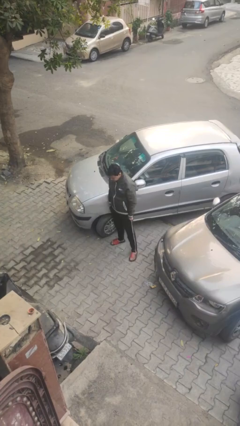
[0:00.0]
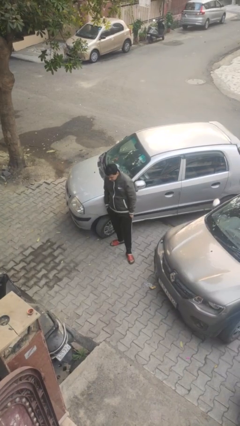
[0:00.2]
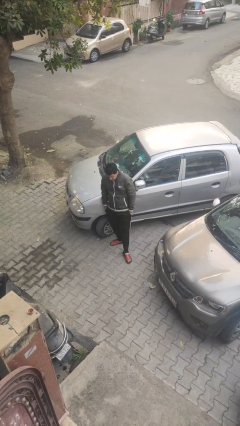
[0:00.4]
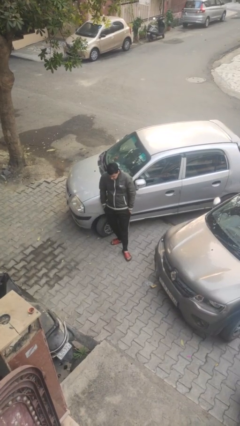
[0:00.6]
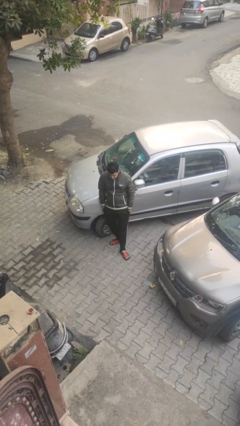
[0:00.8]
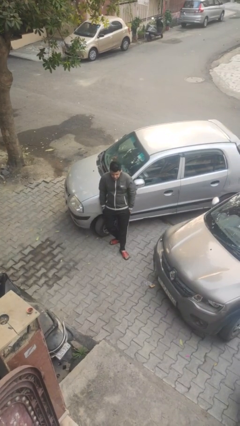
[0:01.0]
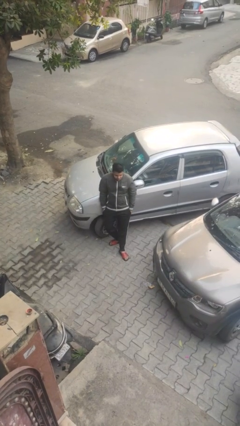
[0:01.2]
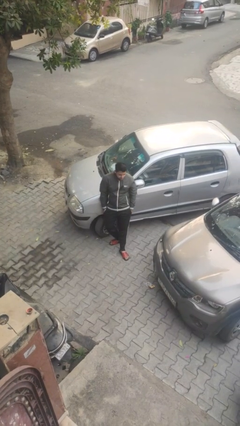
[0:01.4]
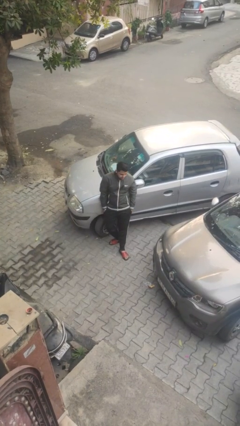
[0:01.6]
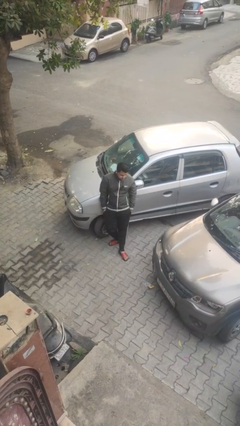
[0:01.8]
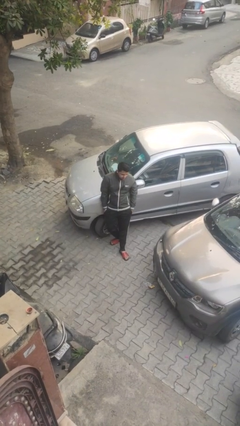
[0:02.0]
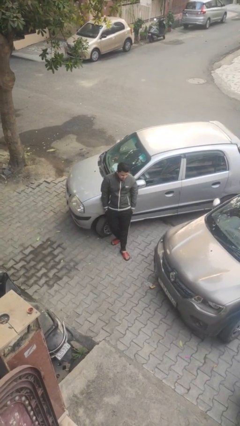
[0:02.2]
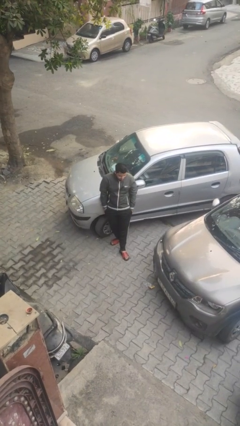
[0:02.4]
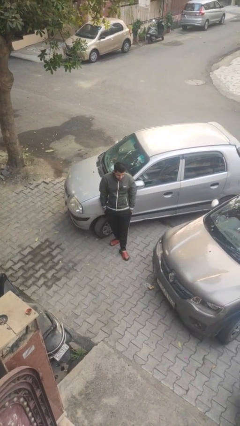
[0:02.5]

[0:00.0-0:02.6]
person leans against car

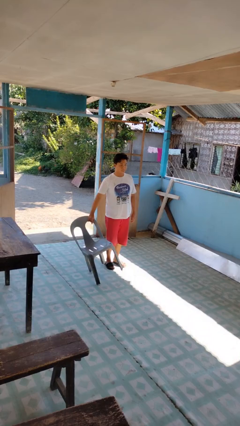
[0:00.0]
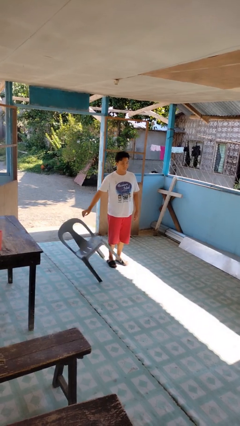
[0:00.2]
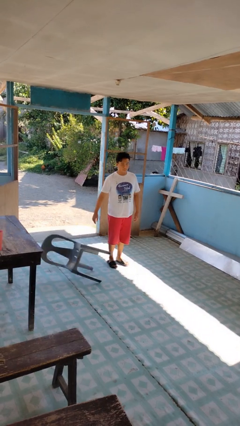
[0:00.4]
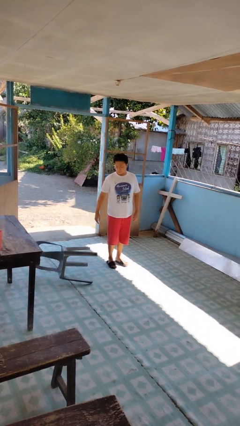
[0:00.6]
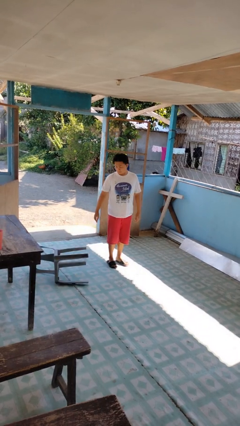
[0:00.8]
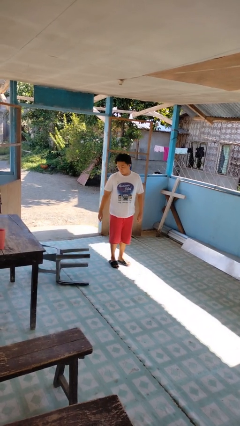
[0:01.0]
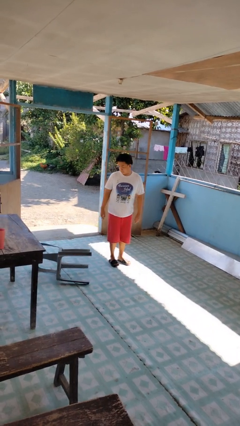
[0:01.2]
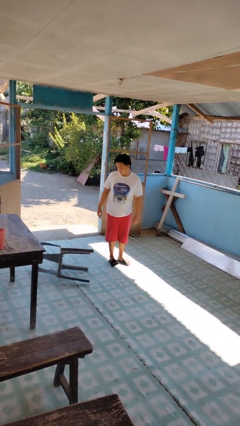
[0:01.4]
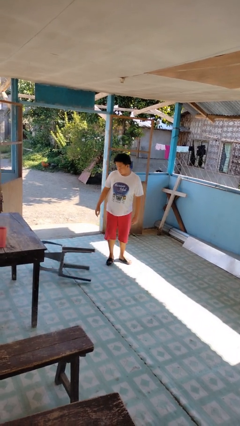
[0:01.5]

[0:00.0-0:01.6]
person knocks over furniture

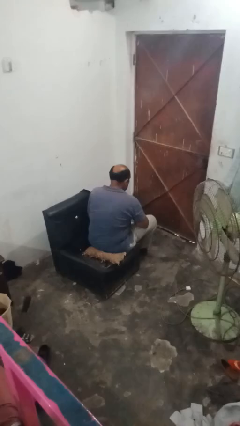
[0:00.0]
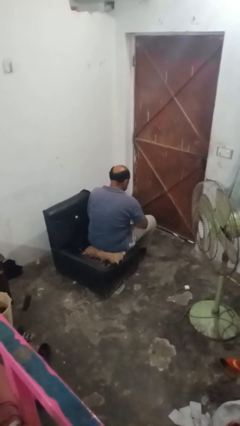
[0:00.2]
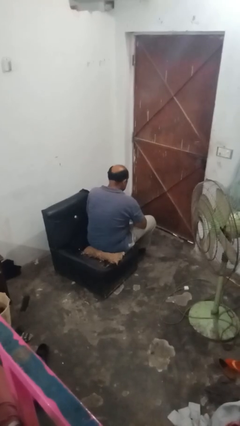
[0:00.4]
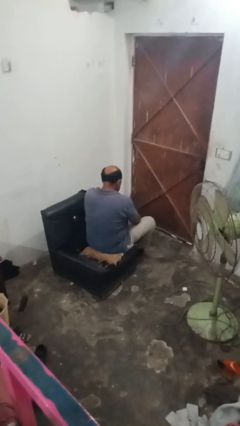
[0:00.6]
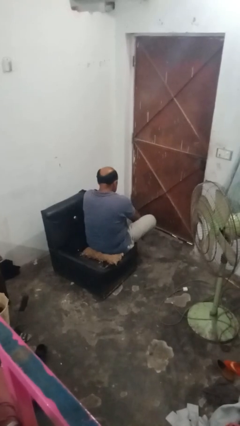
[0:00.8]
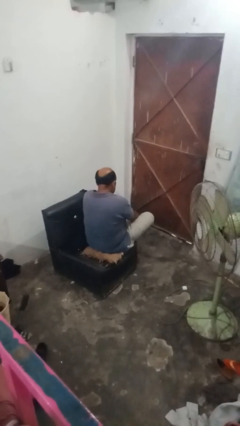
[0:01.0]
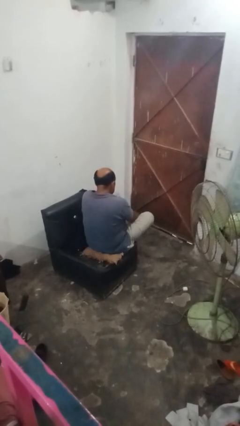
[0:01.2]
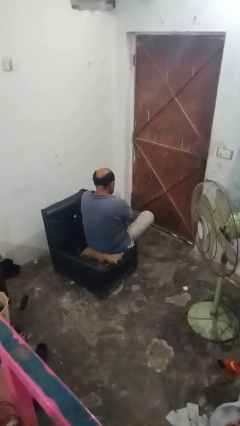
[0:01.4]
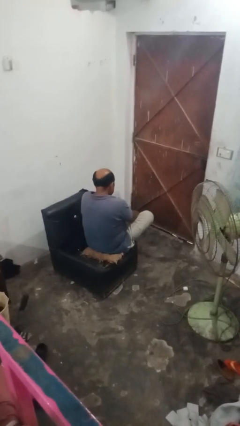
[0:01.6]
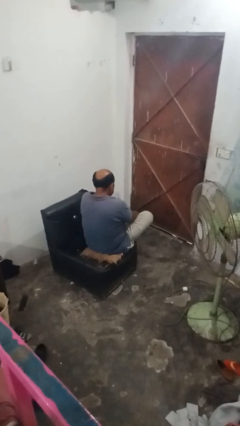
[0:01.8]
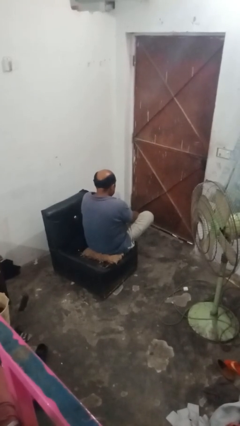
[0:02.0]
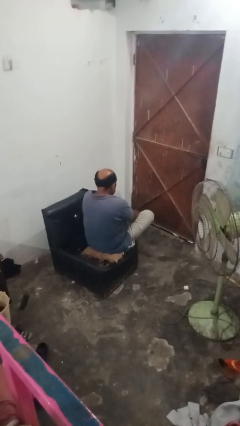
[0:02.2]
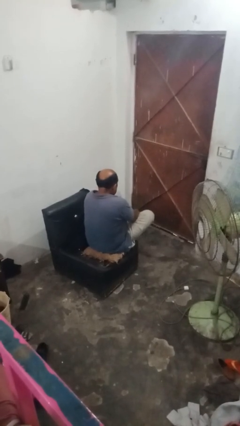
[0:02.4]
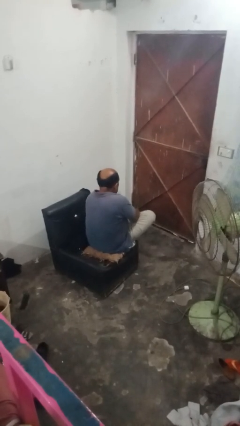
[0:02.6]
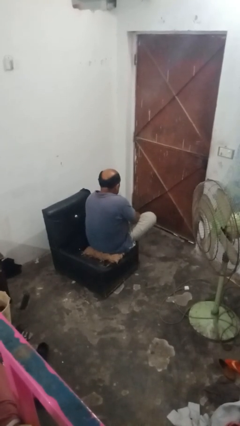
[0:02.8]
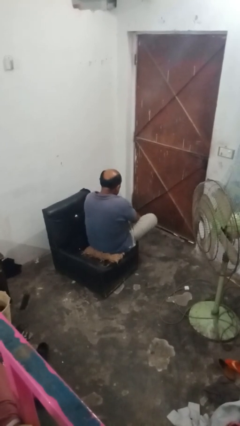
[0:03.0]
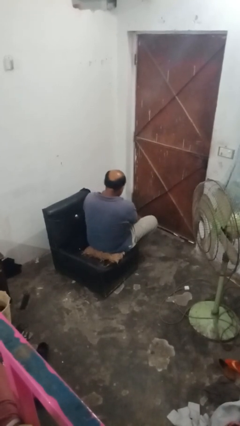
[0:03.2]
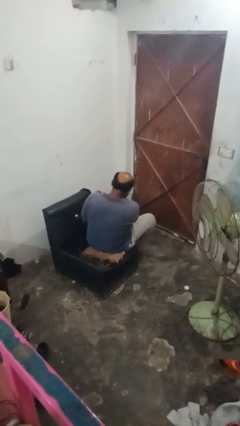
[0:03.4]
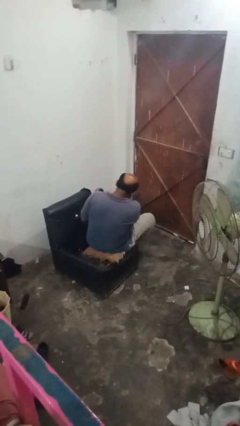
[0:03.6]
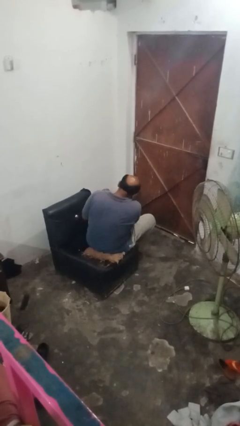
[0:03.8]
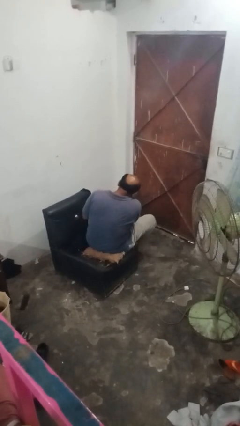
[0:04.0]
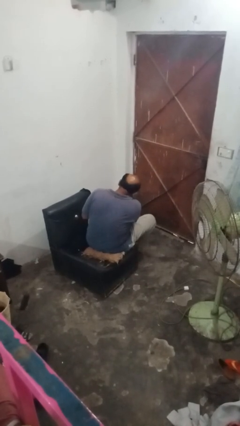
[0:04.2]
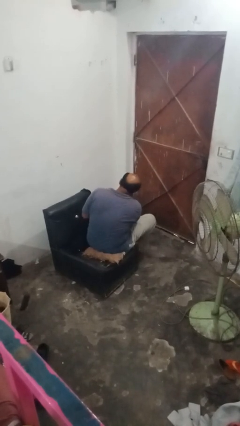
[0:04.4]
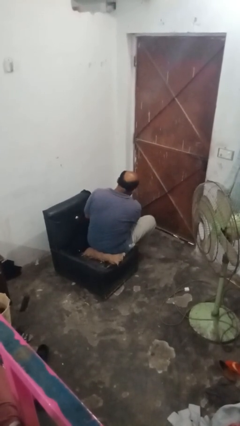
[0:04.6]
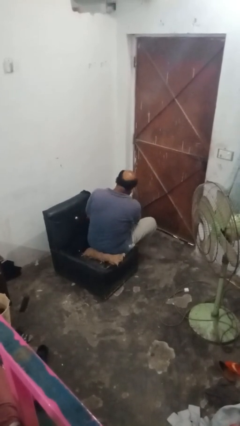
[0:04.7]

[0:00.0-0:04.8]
person takes off socks

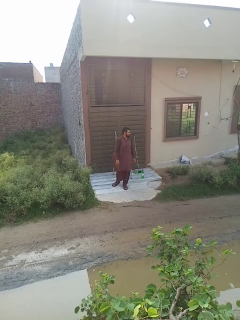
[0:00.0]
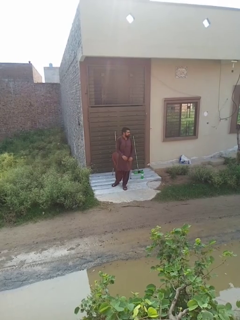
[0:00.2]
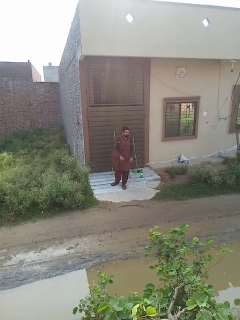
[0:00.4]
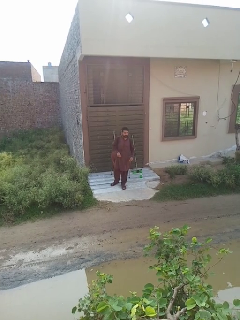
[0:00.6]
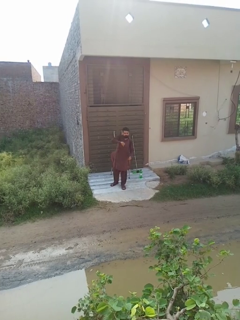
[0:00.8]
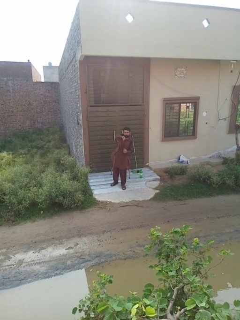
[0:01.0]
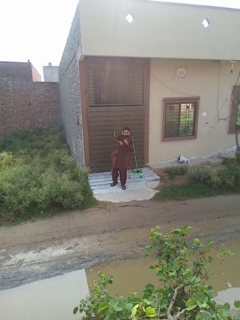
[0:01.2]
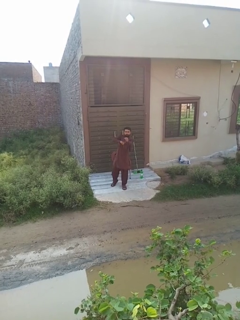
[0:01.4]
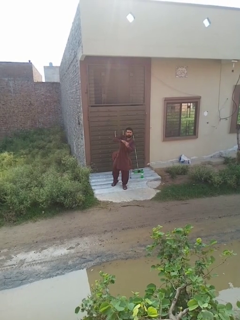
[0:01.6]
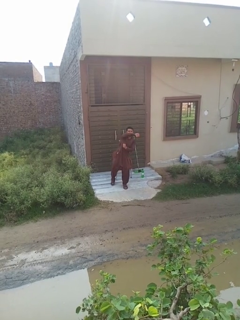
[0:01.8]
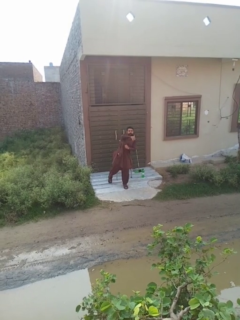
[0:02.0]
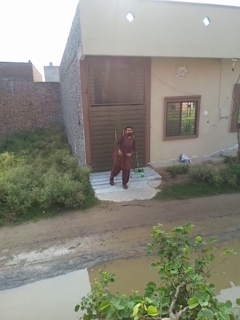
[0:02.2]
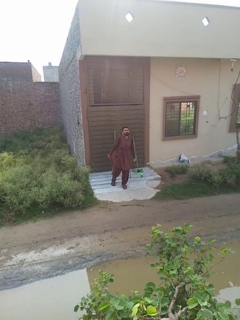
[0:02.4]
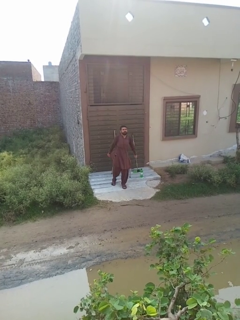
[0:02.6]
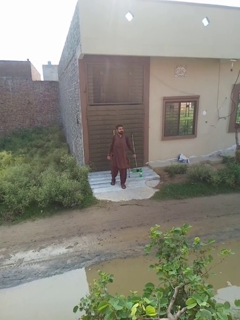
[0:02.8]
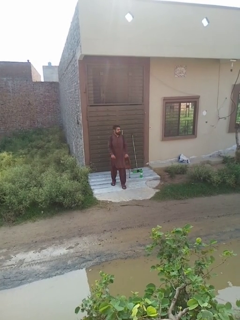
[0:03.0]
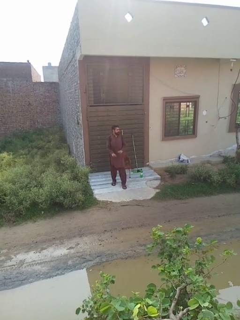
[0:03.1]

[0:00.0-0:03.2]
person punches

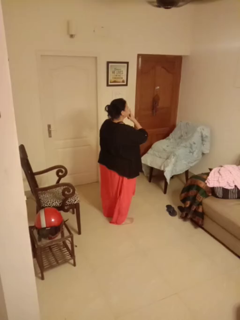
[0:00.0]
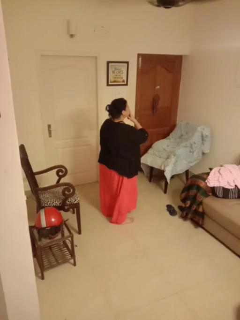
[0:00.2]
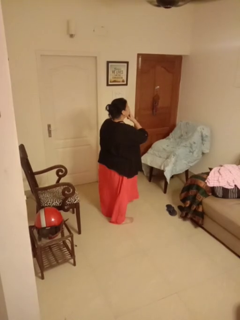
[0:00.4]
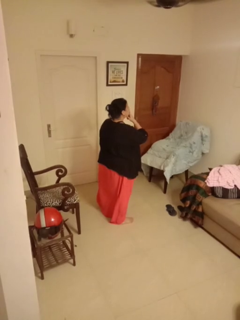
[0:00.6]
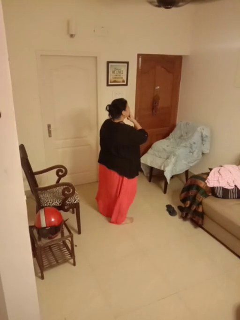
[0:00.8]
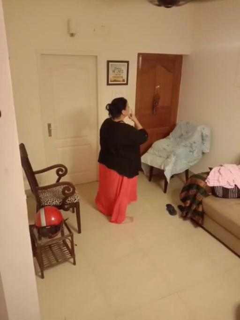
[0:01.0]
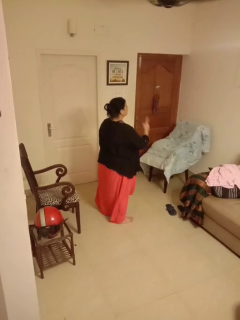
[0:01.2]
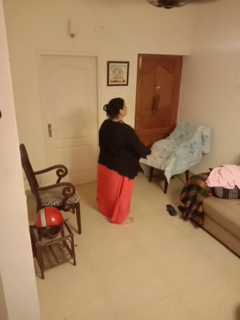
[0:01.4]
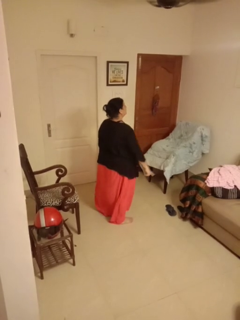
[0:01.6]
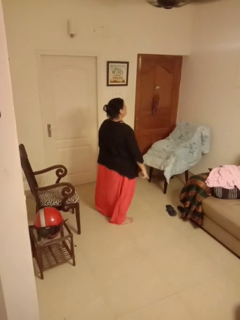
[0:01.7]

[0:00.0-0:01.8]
person gestures be quiet

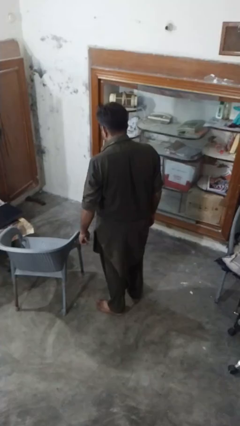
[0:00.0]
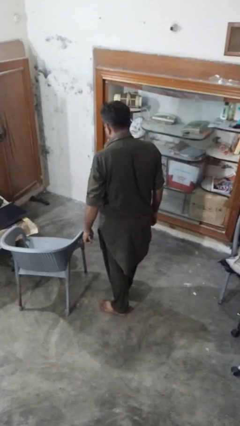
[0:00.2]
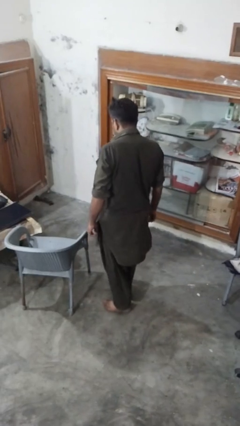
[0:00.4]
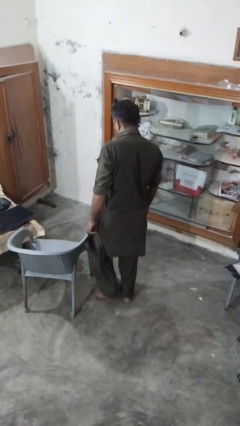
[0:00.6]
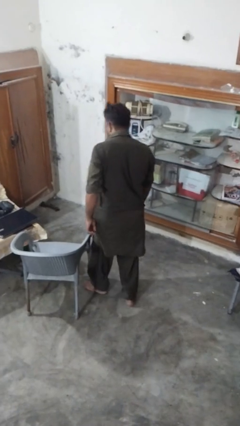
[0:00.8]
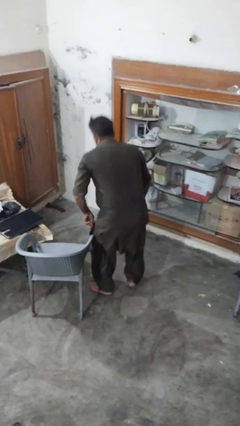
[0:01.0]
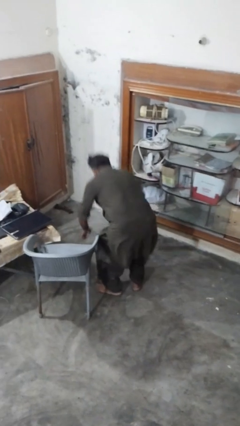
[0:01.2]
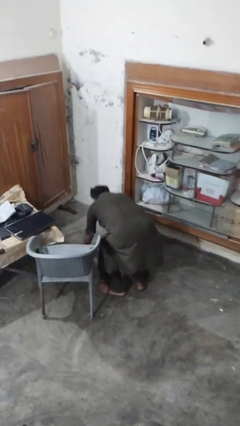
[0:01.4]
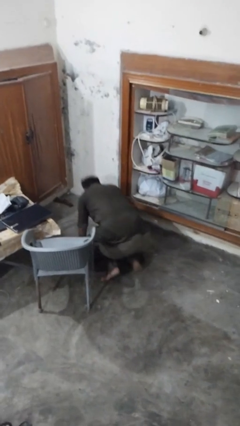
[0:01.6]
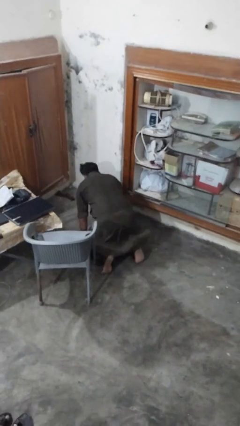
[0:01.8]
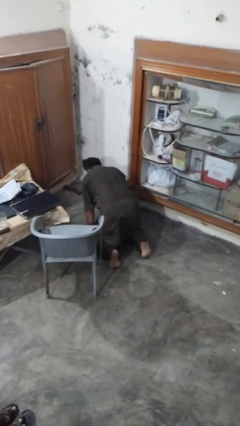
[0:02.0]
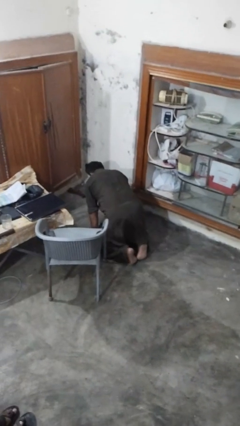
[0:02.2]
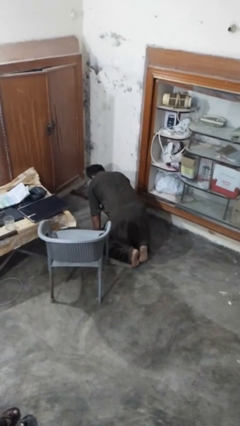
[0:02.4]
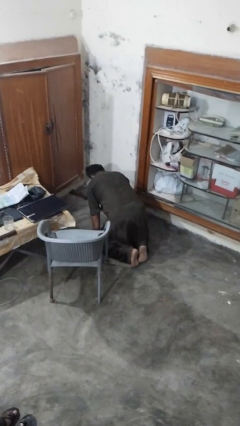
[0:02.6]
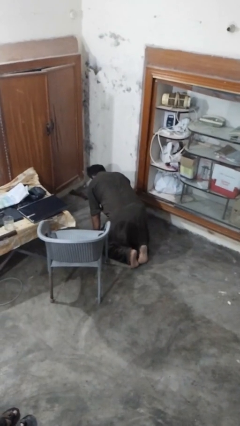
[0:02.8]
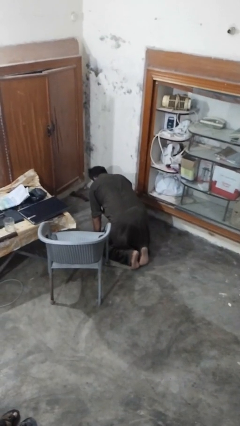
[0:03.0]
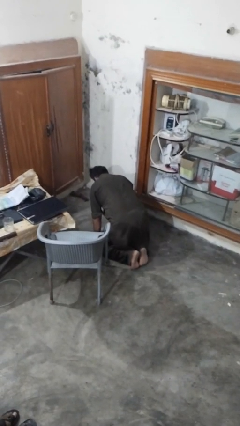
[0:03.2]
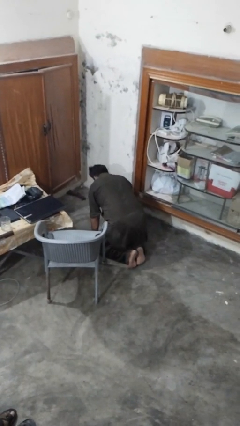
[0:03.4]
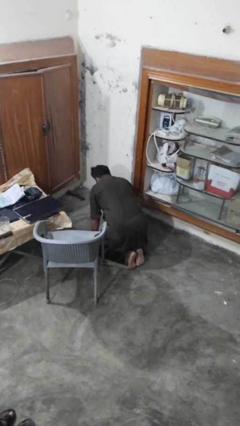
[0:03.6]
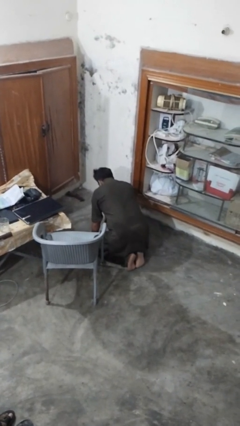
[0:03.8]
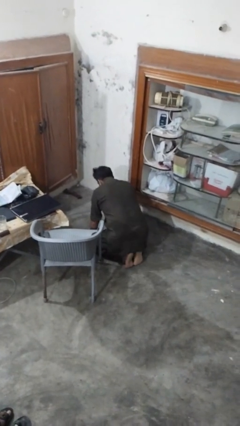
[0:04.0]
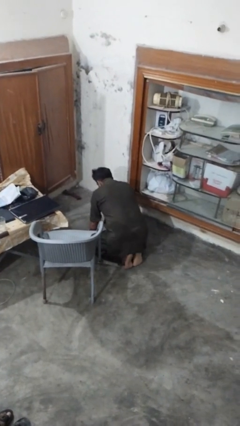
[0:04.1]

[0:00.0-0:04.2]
person trips on object on floor

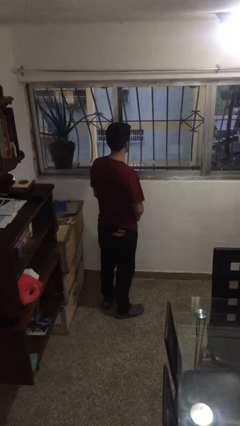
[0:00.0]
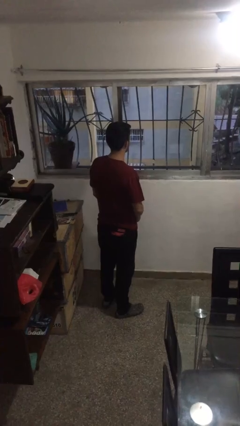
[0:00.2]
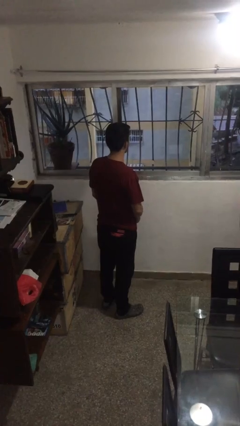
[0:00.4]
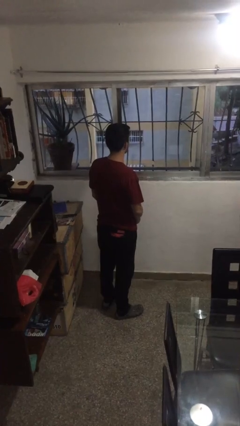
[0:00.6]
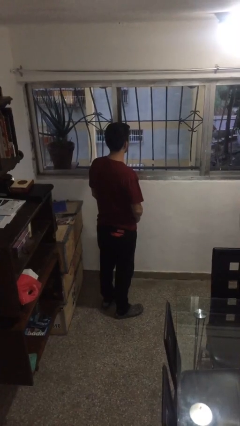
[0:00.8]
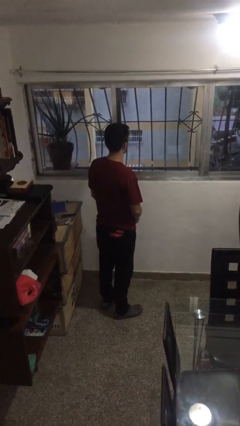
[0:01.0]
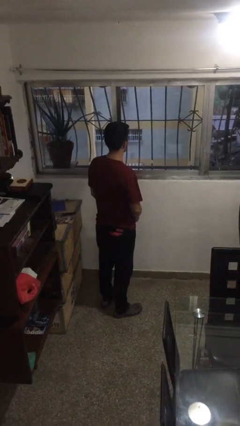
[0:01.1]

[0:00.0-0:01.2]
person applies sunscreen
